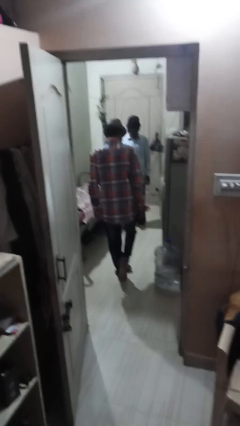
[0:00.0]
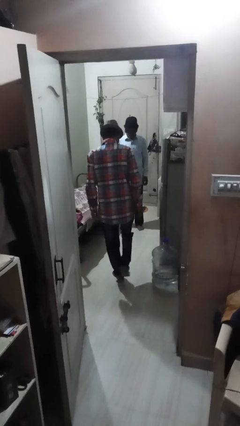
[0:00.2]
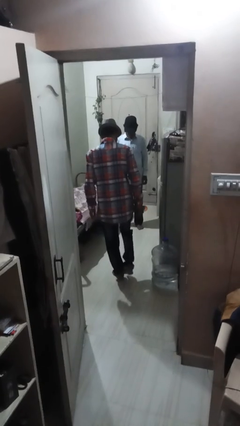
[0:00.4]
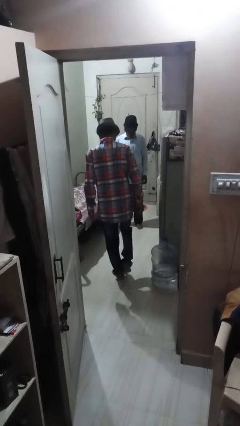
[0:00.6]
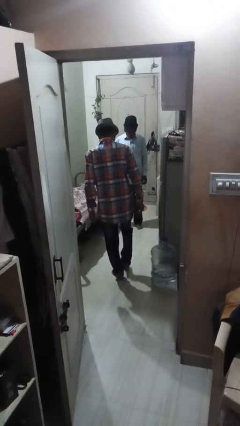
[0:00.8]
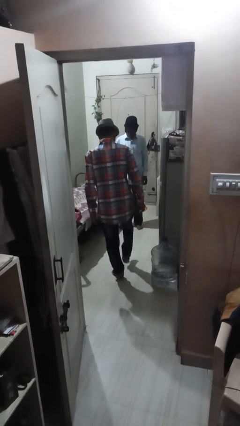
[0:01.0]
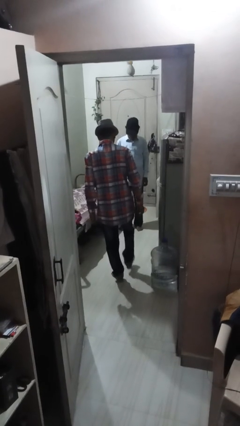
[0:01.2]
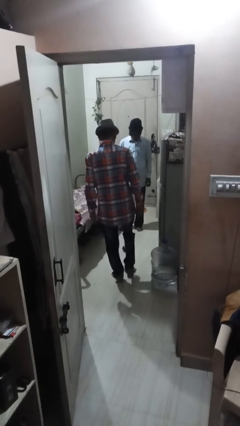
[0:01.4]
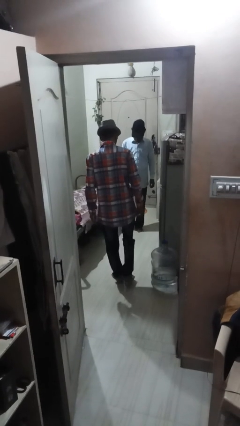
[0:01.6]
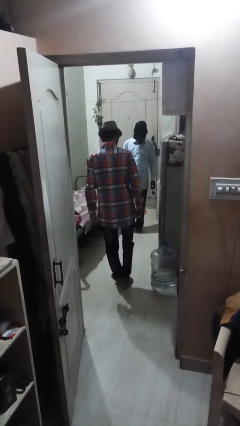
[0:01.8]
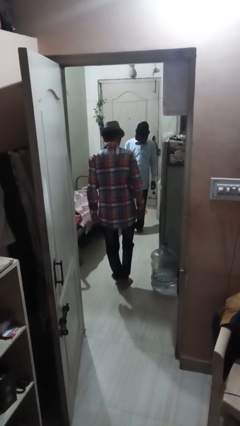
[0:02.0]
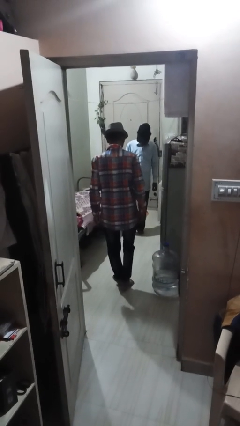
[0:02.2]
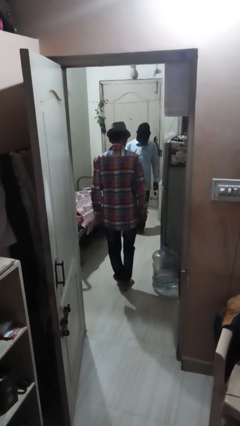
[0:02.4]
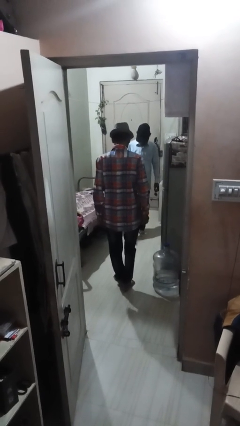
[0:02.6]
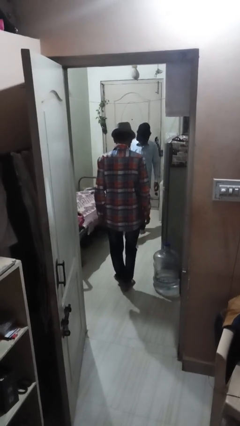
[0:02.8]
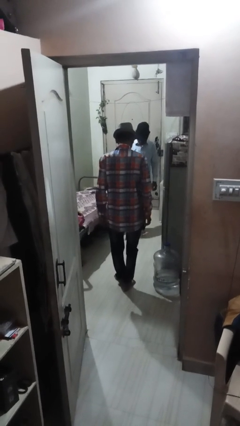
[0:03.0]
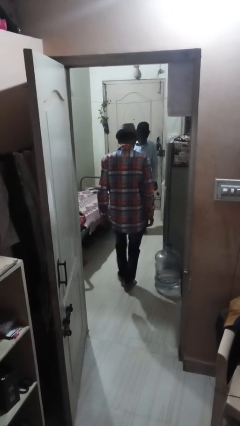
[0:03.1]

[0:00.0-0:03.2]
person kicks object to person

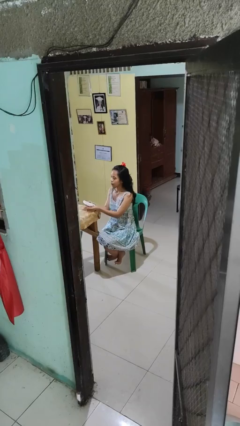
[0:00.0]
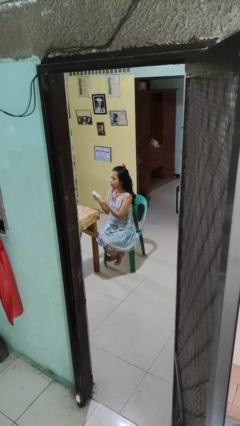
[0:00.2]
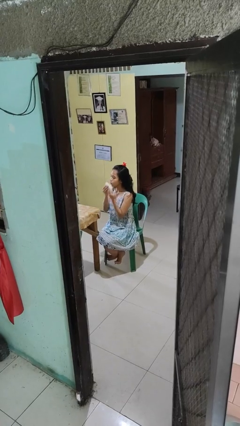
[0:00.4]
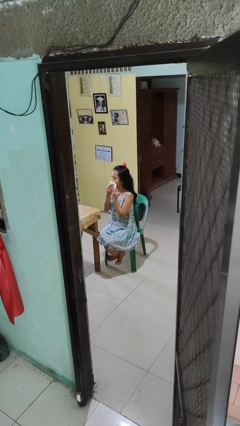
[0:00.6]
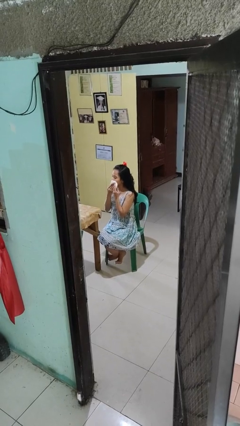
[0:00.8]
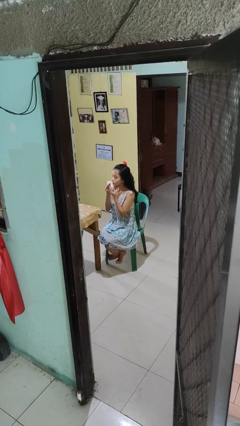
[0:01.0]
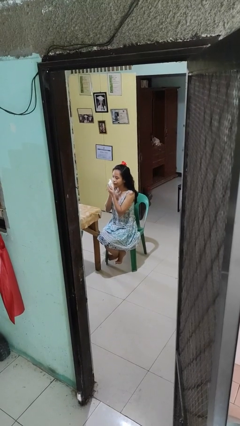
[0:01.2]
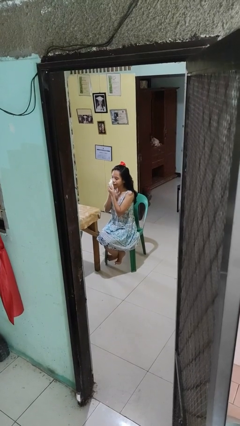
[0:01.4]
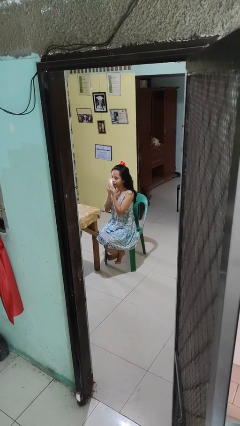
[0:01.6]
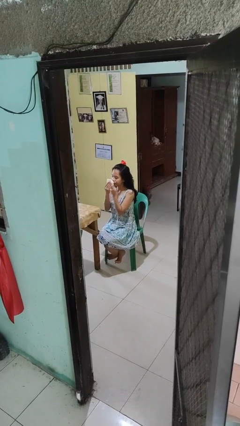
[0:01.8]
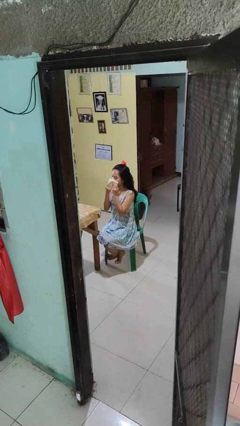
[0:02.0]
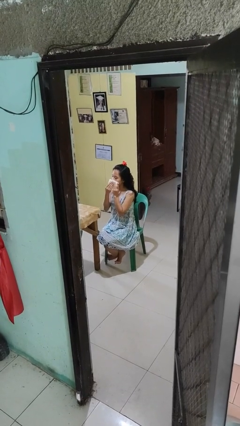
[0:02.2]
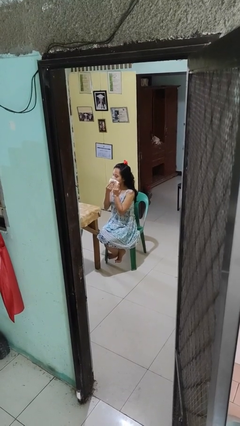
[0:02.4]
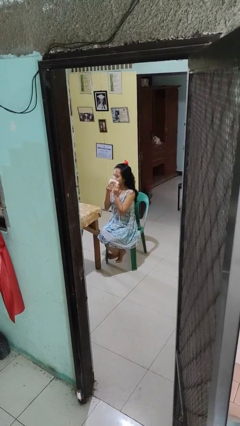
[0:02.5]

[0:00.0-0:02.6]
person wipes mouth with napkin

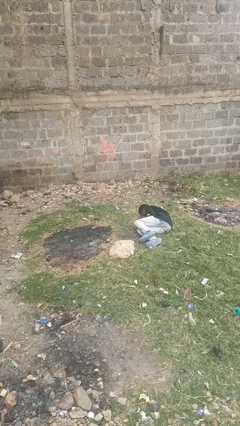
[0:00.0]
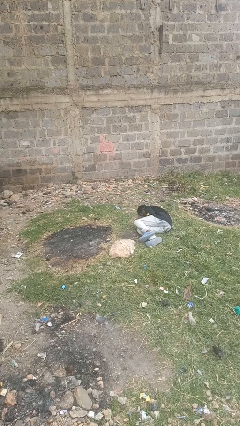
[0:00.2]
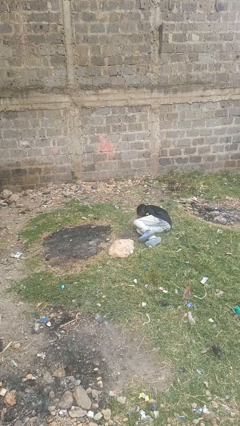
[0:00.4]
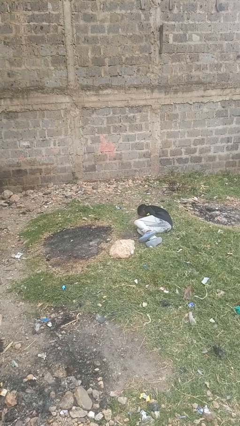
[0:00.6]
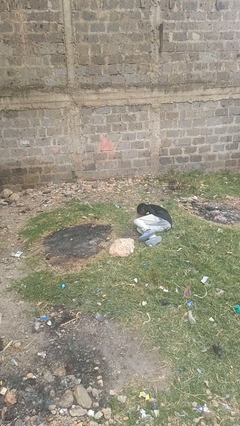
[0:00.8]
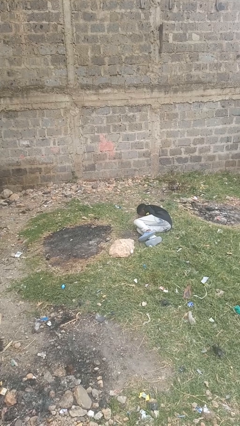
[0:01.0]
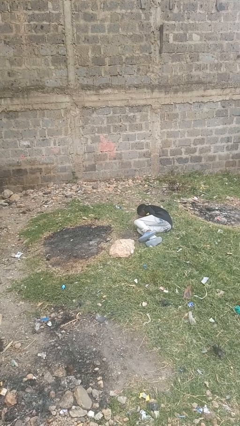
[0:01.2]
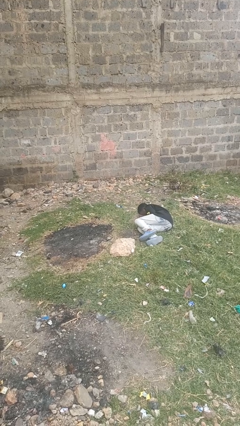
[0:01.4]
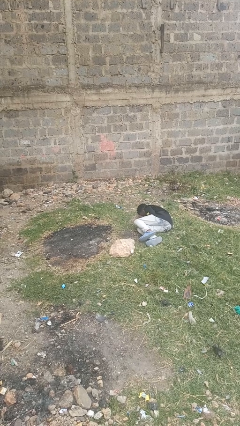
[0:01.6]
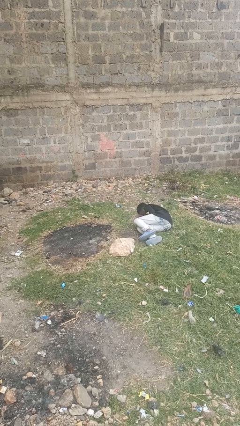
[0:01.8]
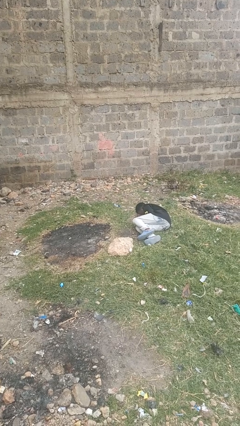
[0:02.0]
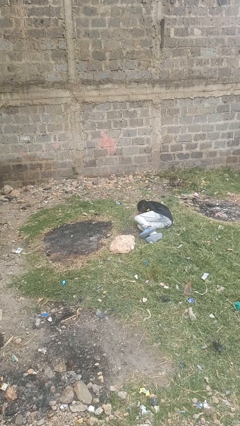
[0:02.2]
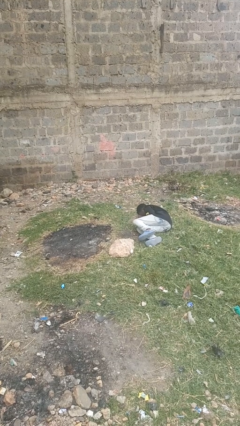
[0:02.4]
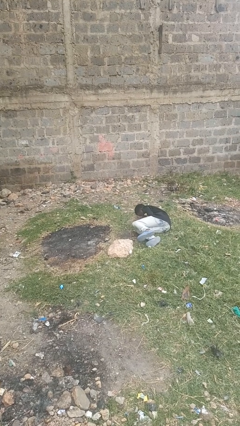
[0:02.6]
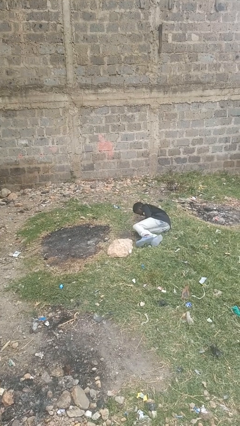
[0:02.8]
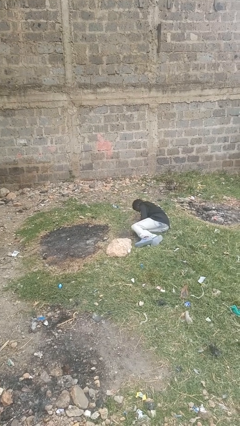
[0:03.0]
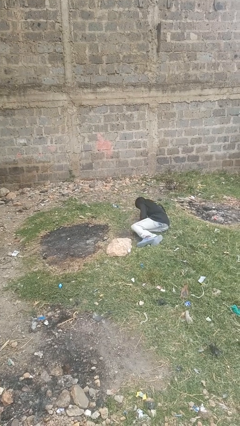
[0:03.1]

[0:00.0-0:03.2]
person lies down on floor

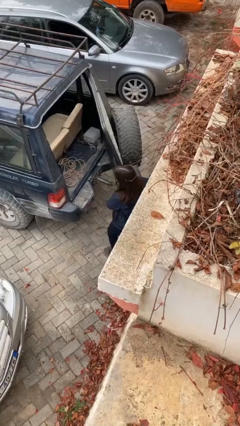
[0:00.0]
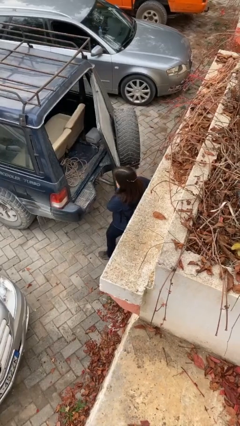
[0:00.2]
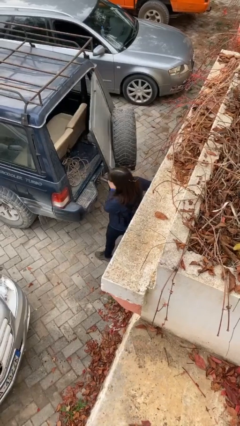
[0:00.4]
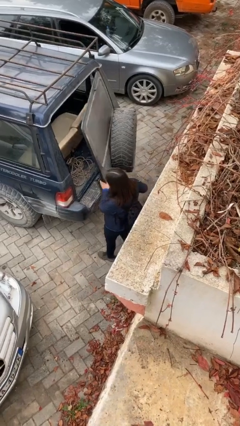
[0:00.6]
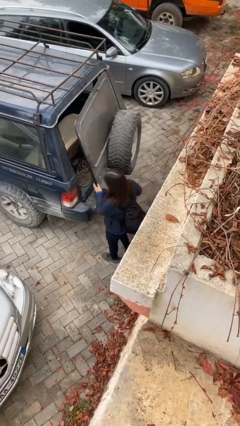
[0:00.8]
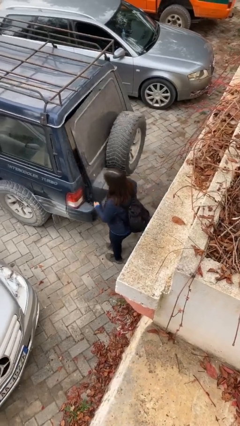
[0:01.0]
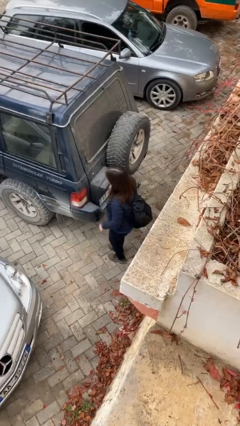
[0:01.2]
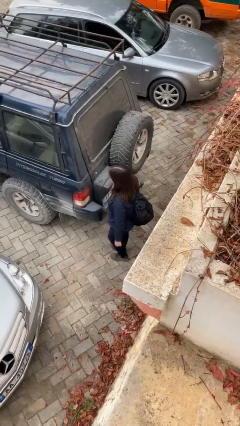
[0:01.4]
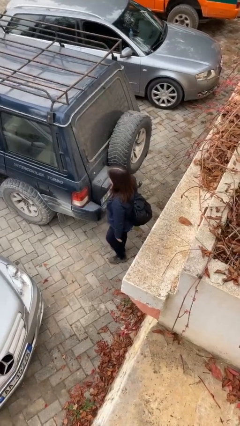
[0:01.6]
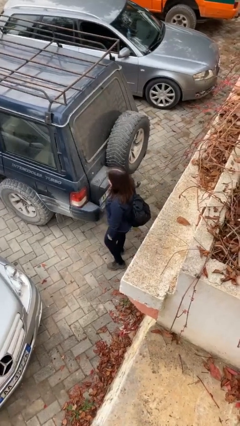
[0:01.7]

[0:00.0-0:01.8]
person closes car trunk

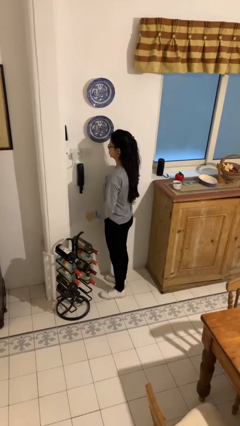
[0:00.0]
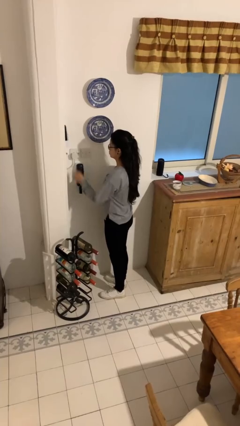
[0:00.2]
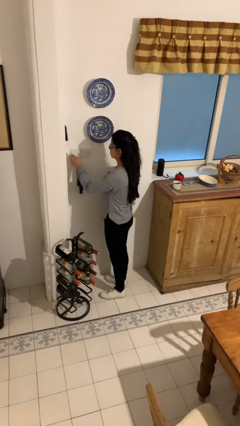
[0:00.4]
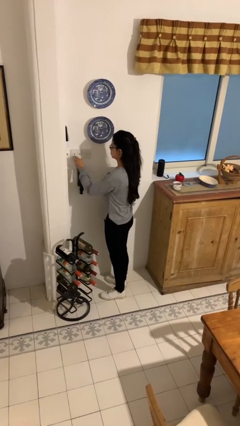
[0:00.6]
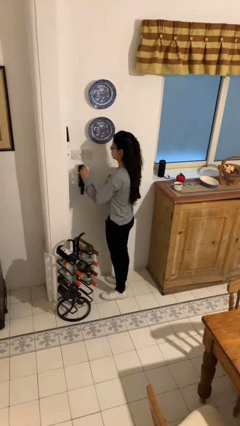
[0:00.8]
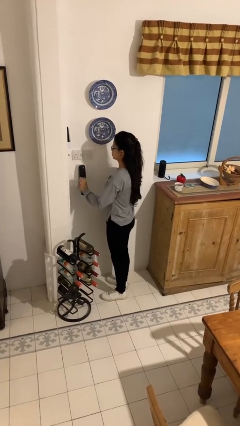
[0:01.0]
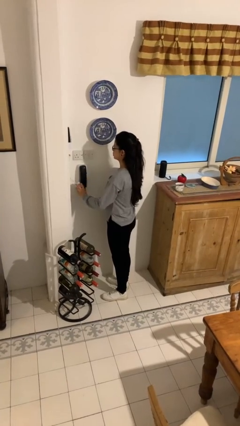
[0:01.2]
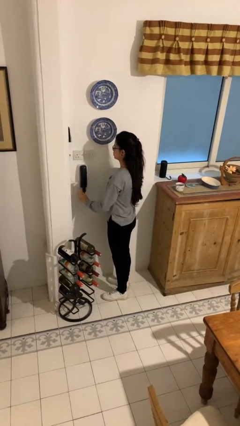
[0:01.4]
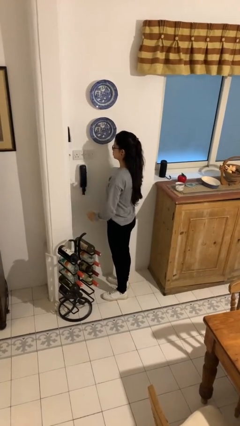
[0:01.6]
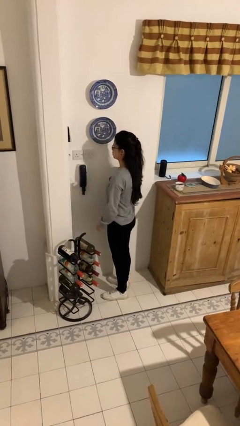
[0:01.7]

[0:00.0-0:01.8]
person unplugs from electrical socket

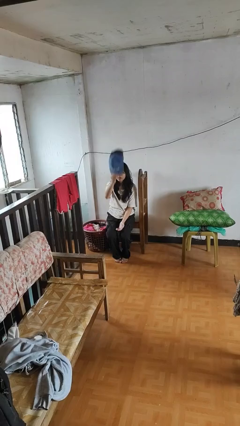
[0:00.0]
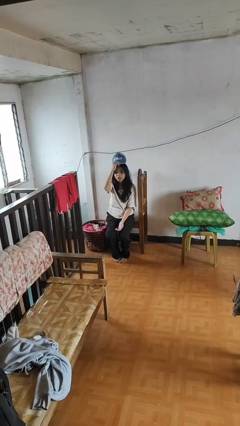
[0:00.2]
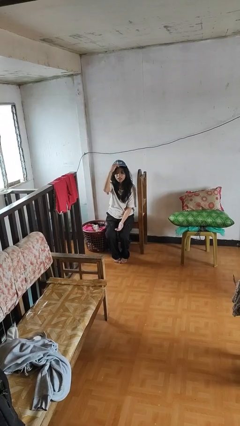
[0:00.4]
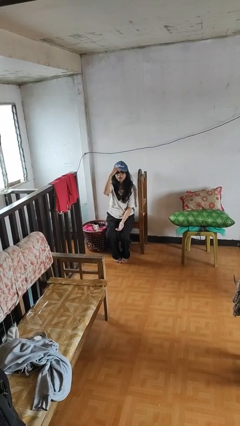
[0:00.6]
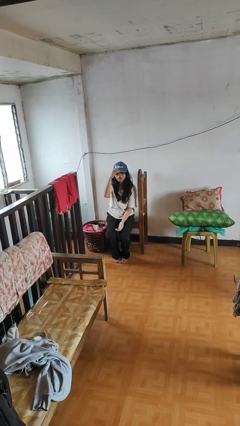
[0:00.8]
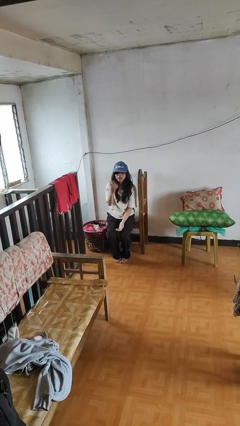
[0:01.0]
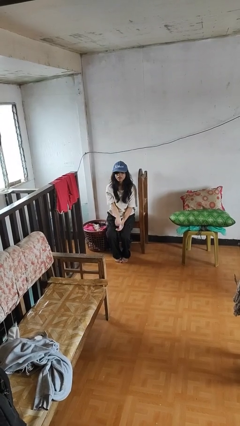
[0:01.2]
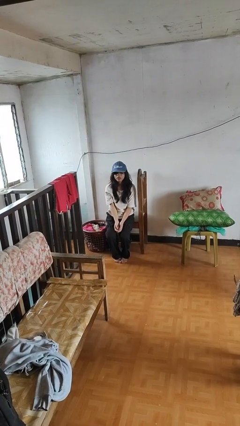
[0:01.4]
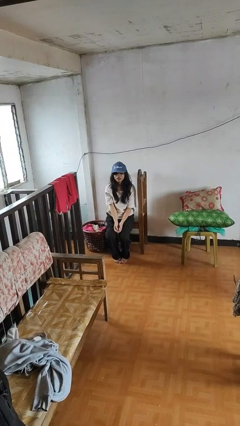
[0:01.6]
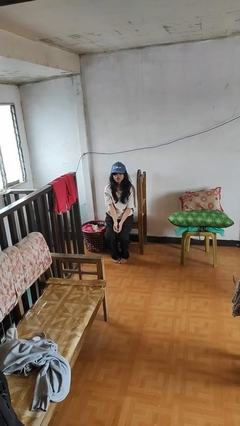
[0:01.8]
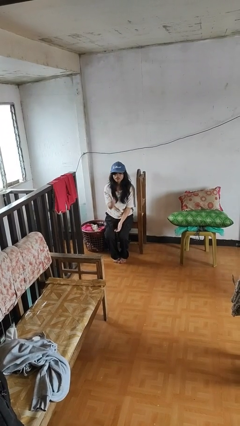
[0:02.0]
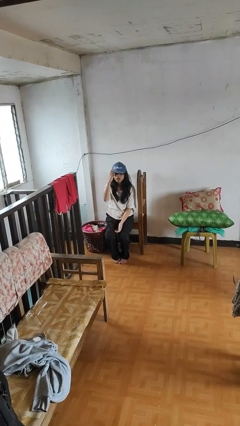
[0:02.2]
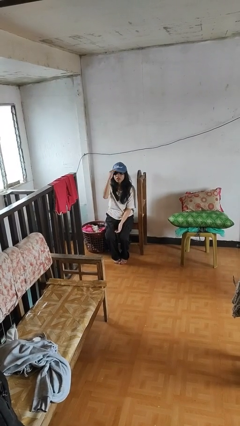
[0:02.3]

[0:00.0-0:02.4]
person puts on hat

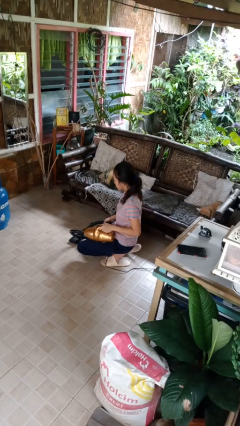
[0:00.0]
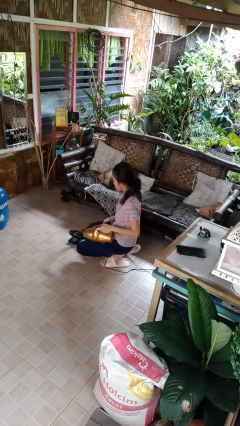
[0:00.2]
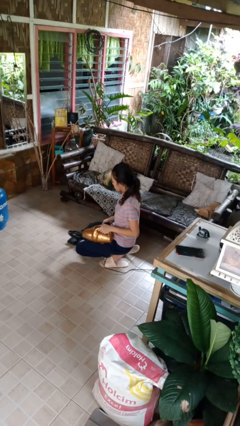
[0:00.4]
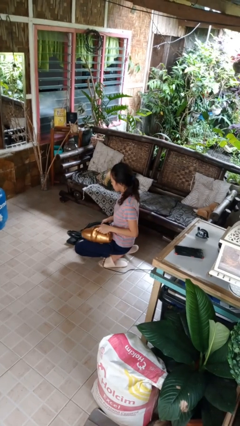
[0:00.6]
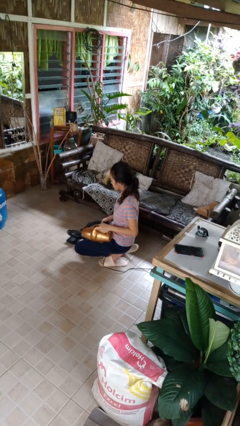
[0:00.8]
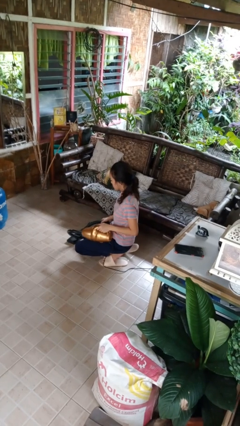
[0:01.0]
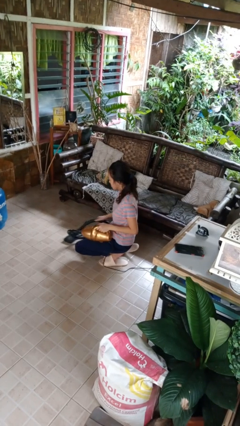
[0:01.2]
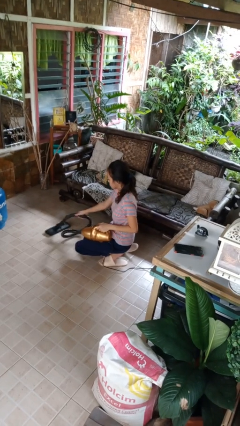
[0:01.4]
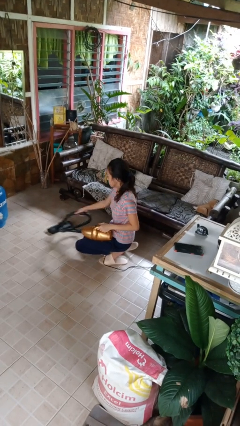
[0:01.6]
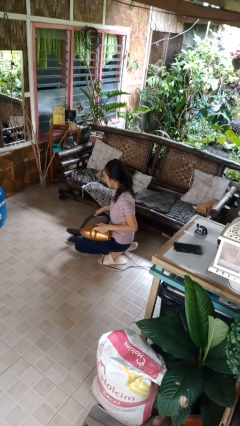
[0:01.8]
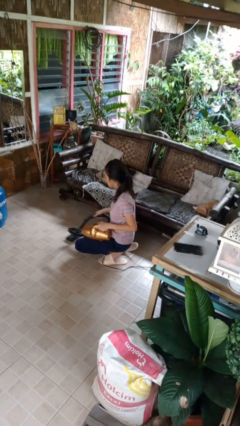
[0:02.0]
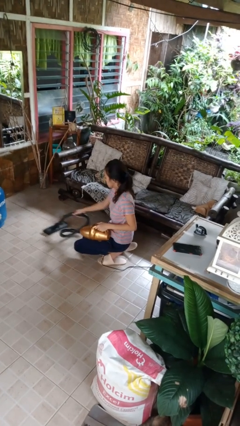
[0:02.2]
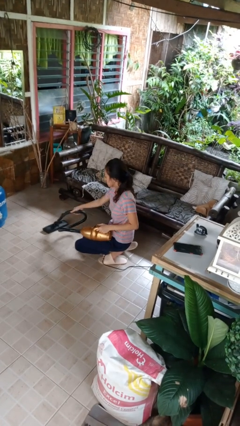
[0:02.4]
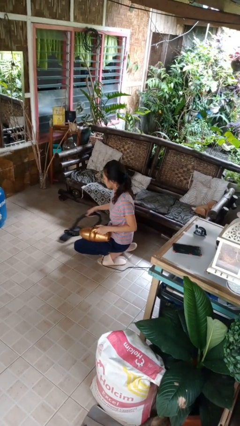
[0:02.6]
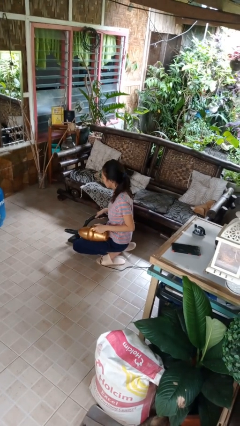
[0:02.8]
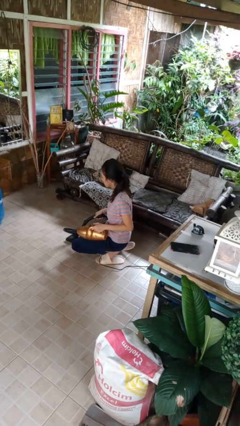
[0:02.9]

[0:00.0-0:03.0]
person vacuums carpet
